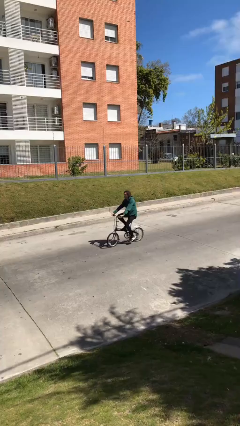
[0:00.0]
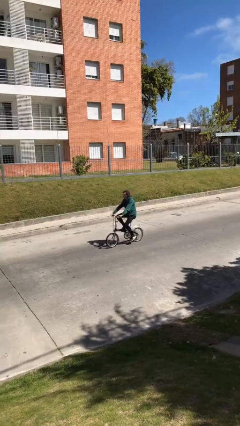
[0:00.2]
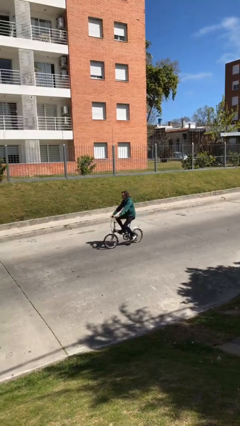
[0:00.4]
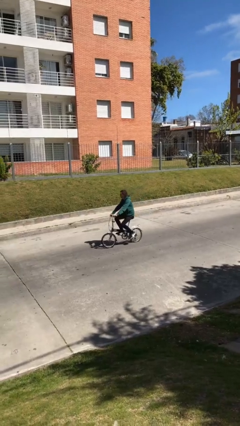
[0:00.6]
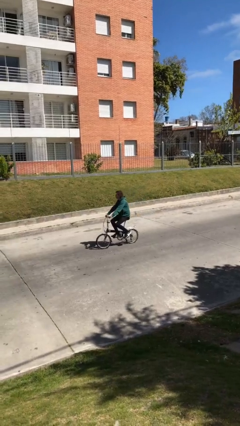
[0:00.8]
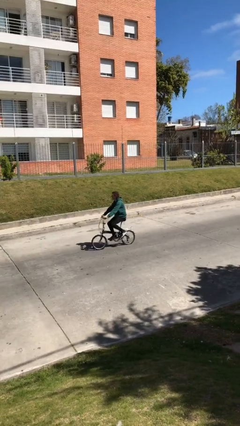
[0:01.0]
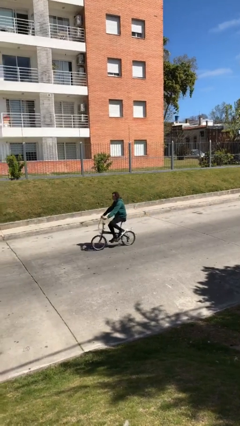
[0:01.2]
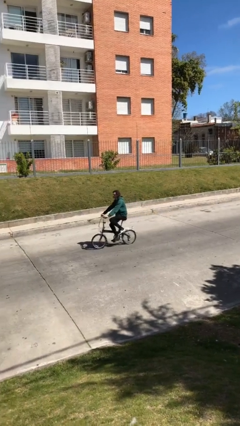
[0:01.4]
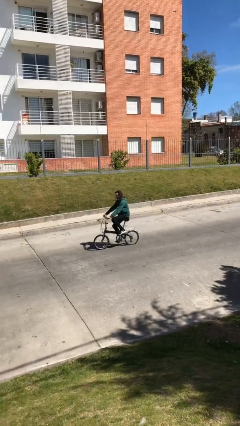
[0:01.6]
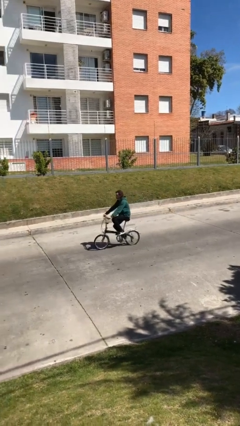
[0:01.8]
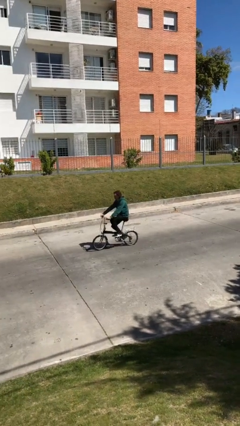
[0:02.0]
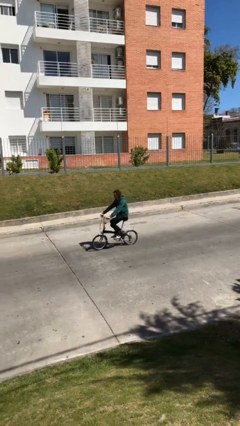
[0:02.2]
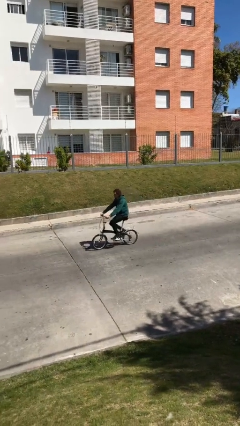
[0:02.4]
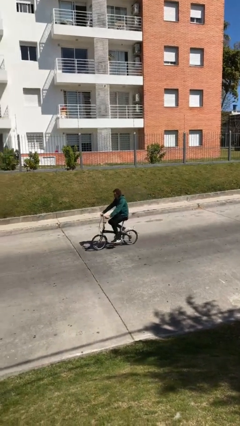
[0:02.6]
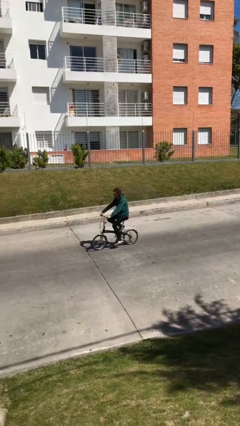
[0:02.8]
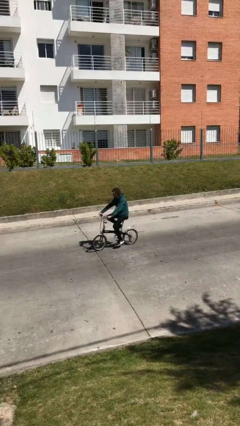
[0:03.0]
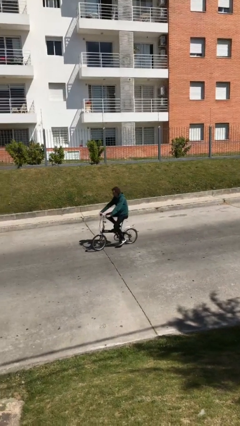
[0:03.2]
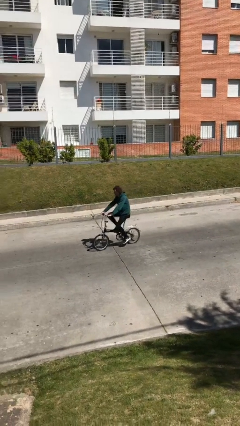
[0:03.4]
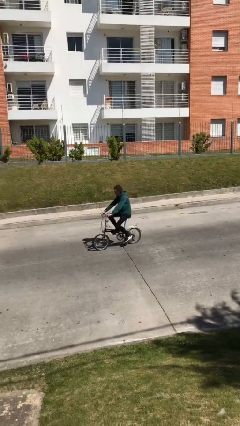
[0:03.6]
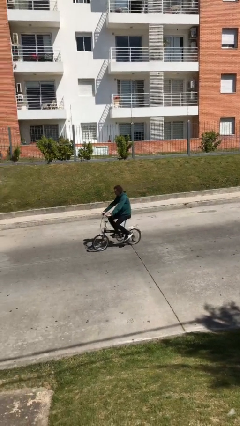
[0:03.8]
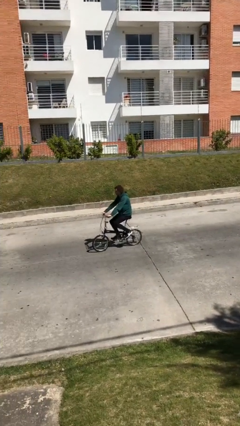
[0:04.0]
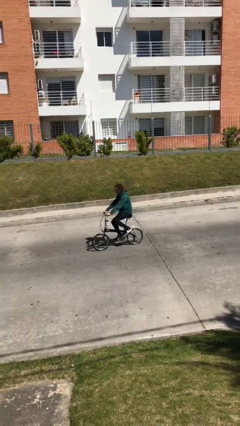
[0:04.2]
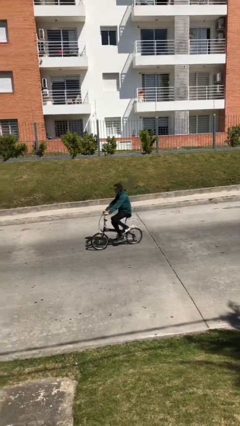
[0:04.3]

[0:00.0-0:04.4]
person rides bicycle

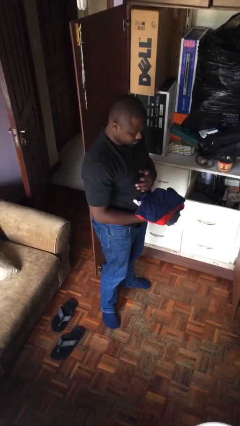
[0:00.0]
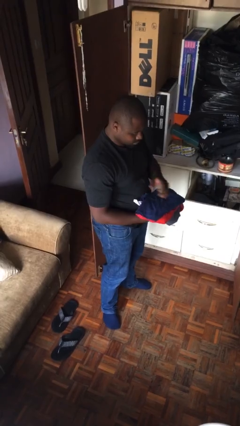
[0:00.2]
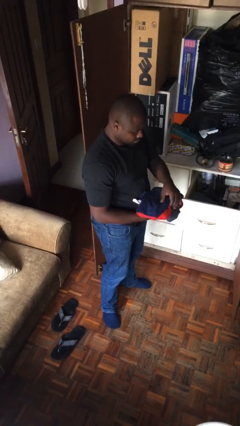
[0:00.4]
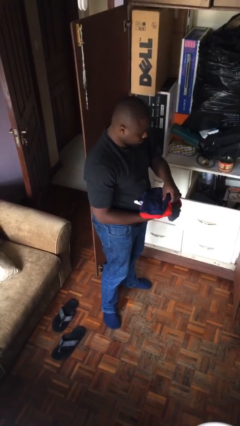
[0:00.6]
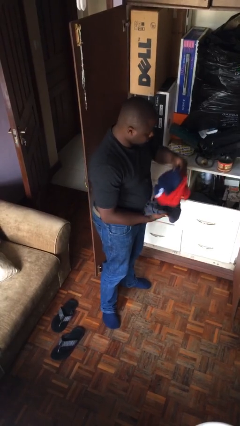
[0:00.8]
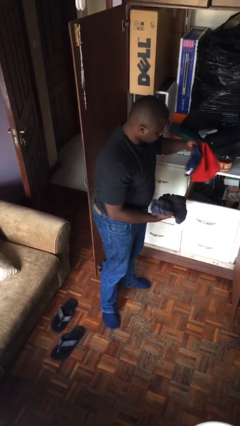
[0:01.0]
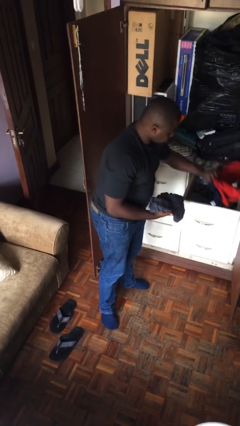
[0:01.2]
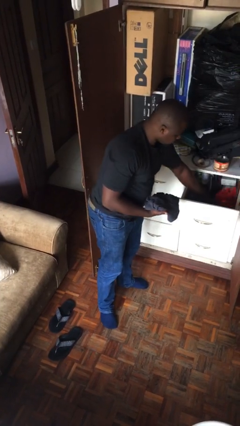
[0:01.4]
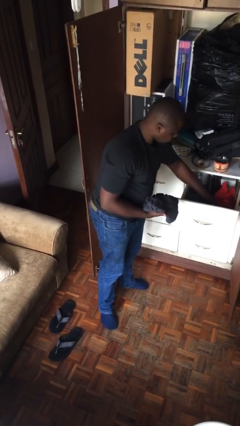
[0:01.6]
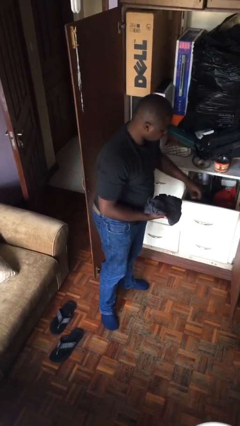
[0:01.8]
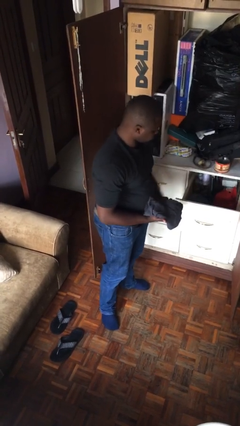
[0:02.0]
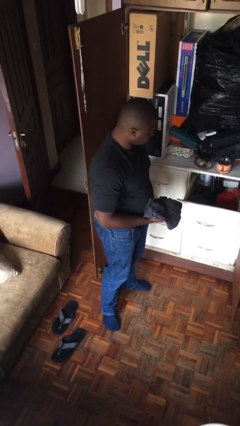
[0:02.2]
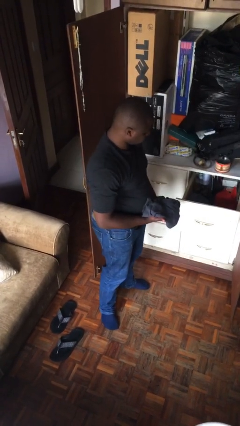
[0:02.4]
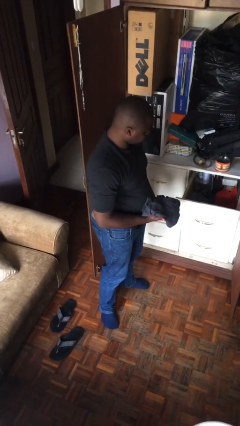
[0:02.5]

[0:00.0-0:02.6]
person puts clothes into dresser

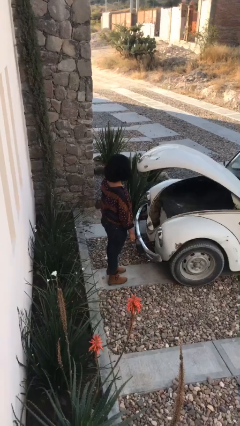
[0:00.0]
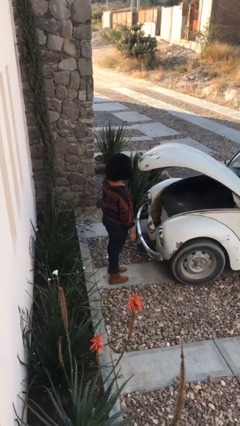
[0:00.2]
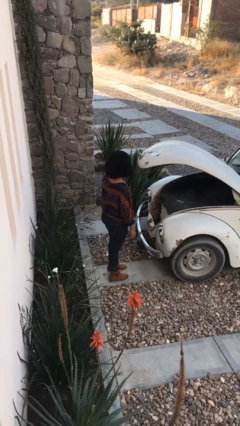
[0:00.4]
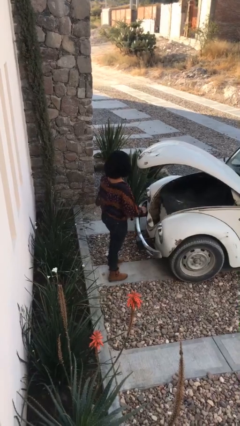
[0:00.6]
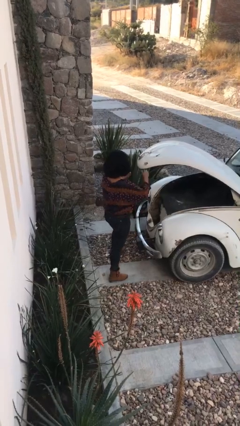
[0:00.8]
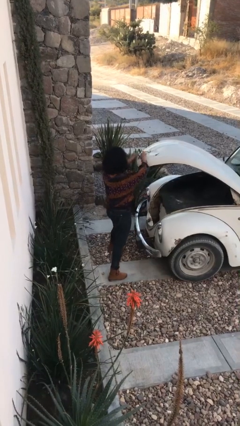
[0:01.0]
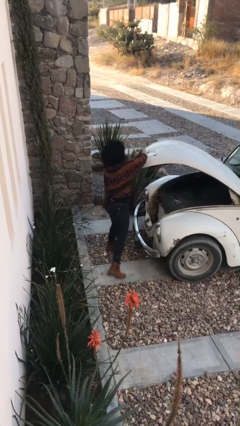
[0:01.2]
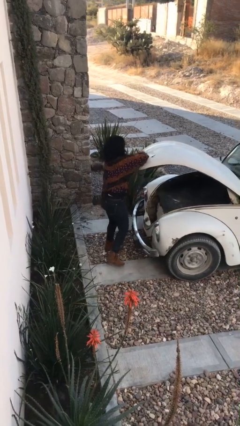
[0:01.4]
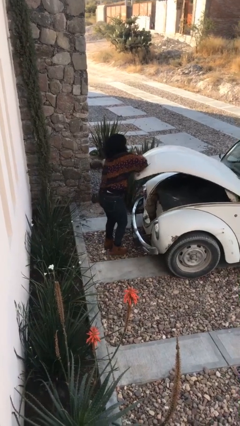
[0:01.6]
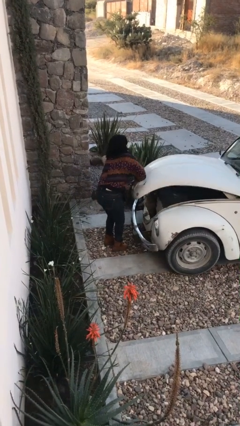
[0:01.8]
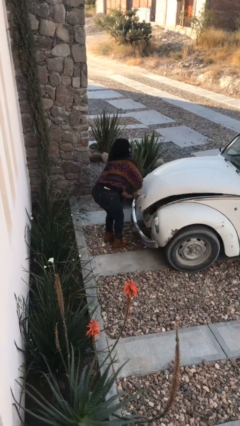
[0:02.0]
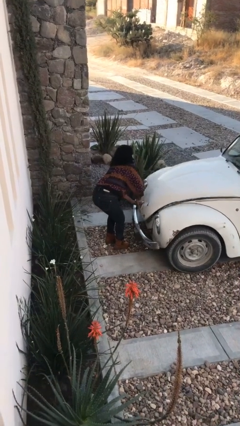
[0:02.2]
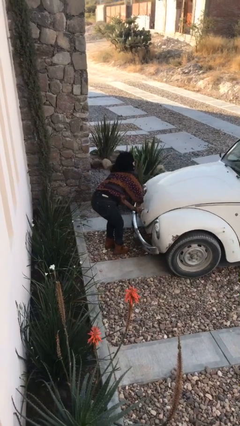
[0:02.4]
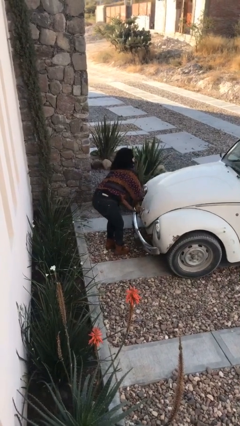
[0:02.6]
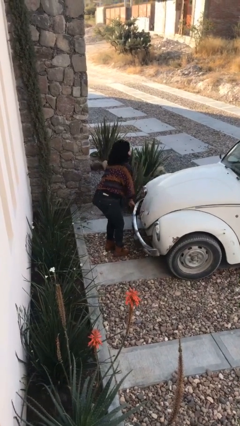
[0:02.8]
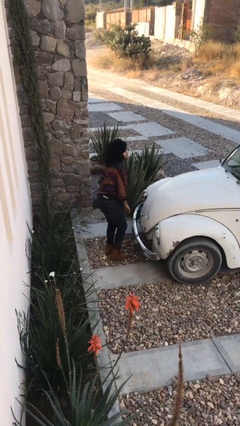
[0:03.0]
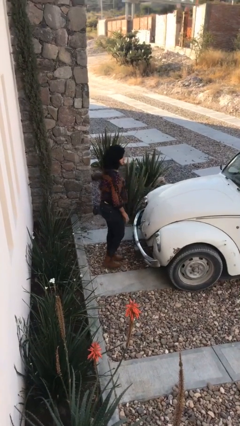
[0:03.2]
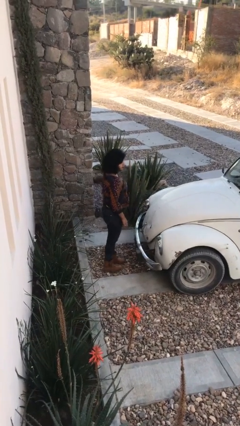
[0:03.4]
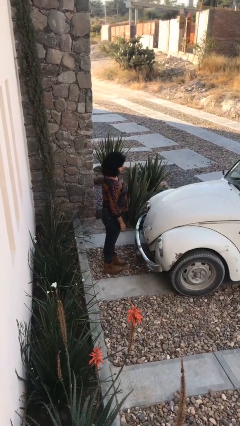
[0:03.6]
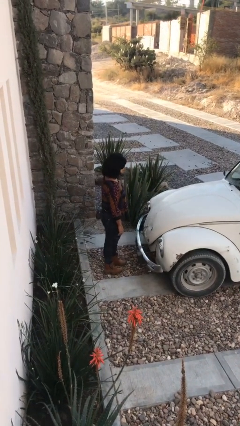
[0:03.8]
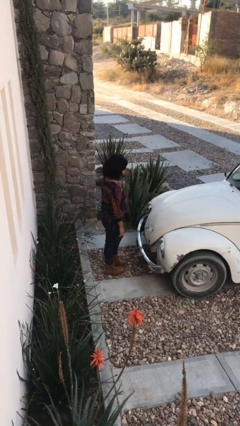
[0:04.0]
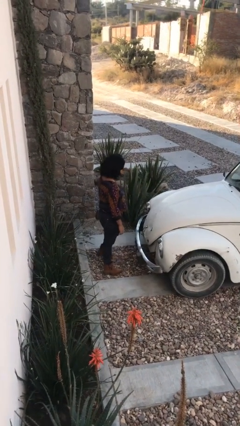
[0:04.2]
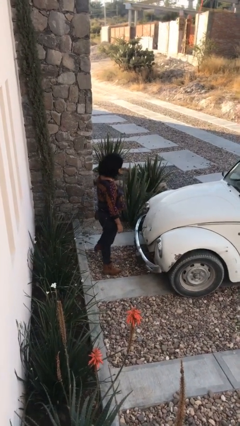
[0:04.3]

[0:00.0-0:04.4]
person closes car trunk

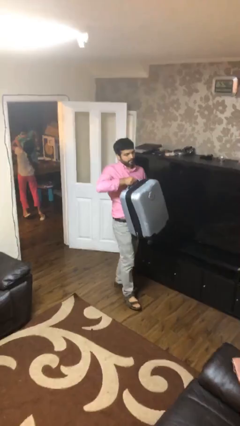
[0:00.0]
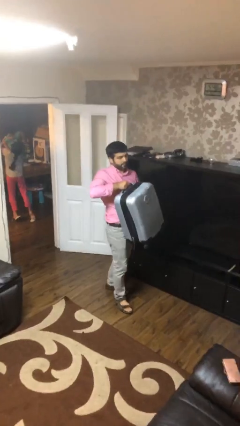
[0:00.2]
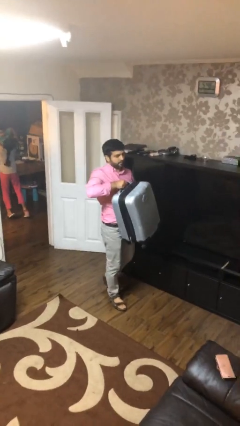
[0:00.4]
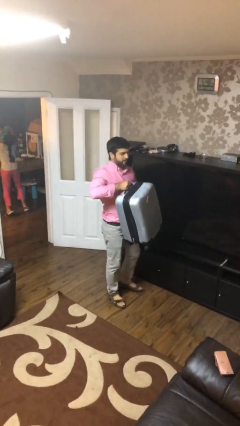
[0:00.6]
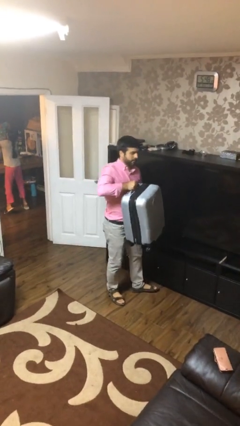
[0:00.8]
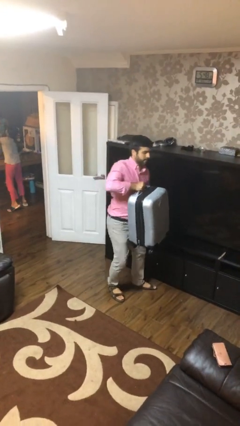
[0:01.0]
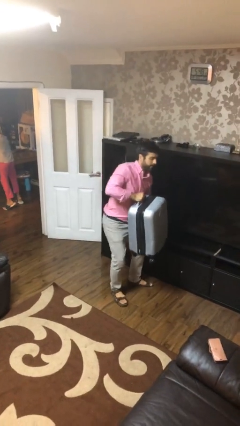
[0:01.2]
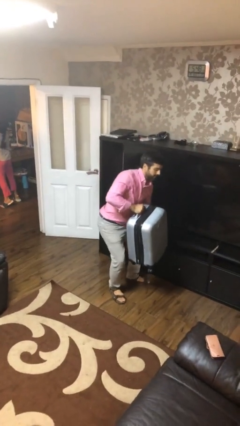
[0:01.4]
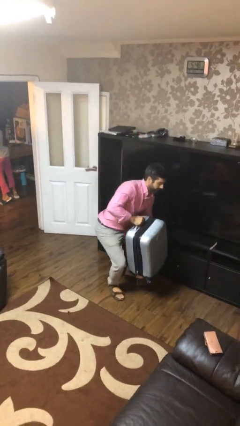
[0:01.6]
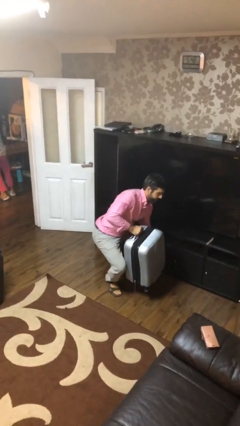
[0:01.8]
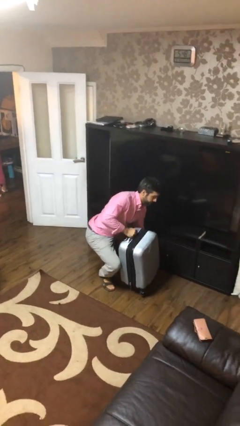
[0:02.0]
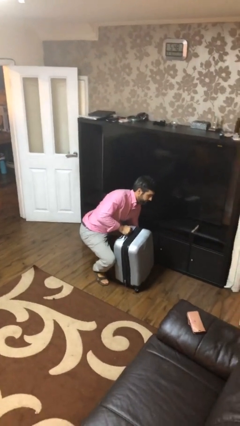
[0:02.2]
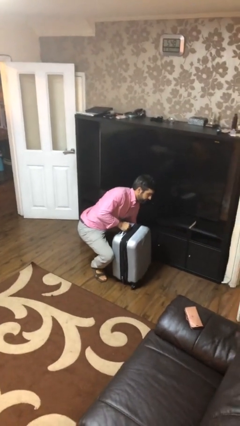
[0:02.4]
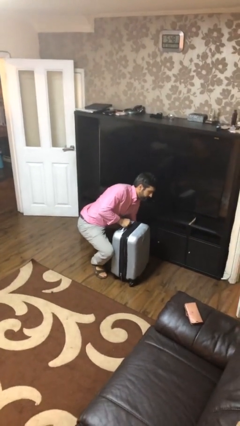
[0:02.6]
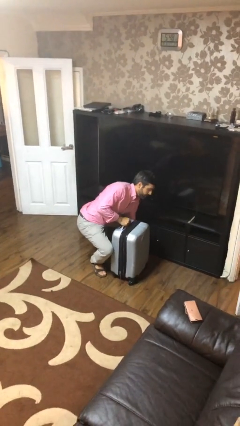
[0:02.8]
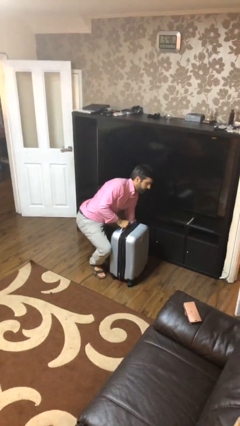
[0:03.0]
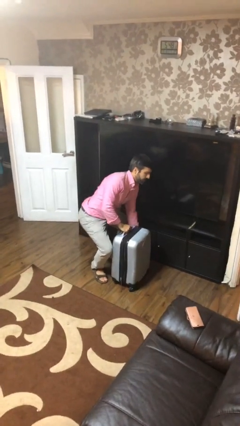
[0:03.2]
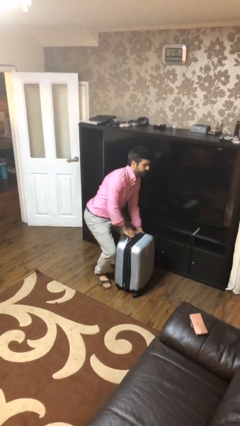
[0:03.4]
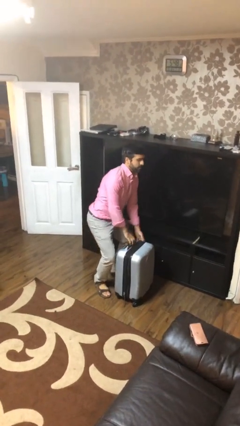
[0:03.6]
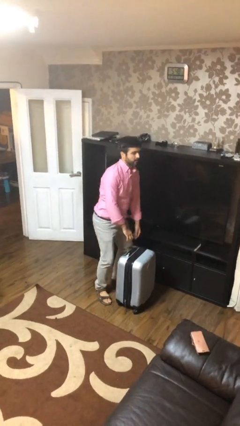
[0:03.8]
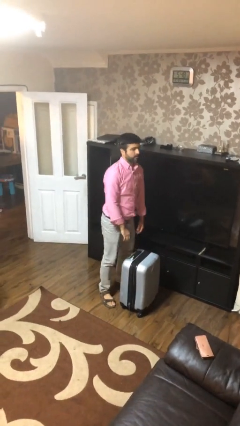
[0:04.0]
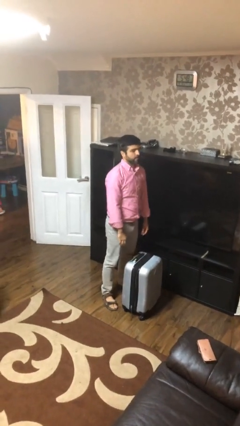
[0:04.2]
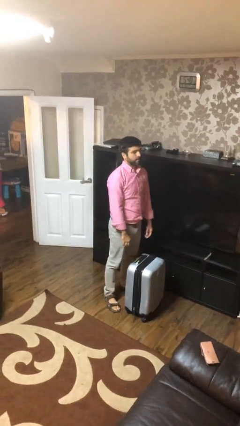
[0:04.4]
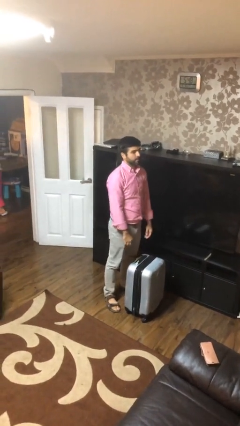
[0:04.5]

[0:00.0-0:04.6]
person puts down object on floor

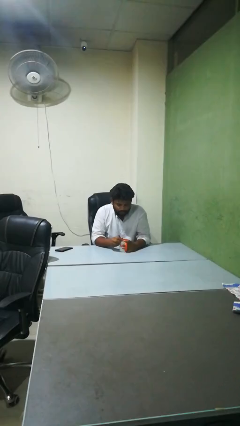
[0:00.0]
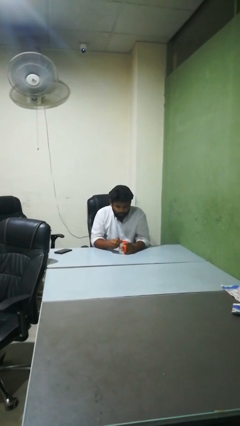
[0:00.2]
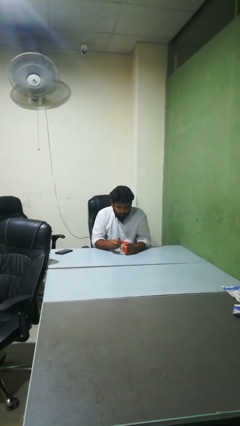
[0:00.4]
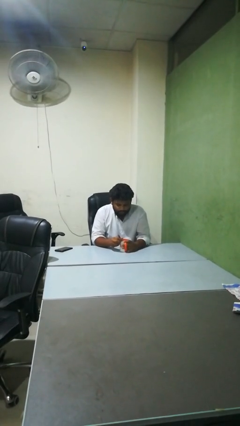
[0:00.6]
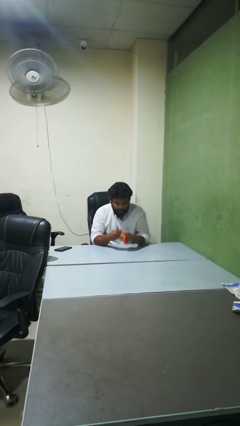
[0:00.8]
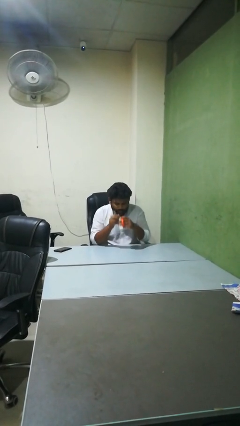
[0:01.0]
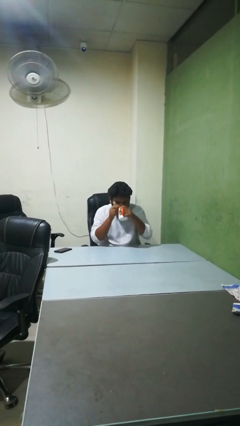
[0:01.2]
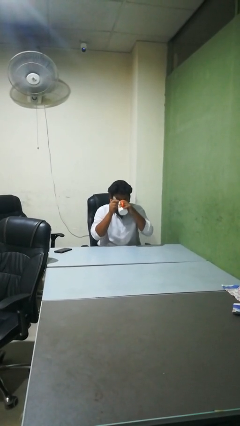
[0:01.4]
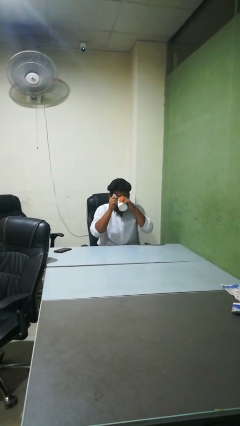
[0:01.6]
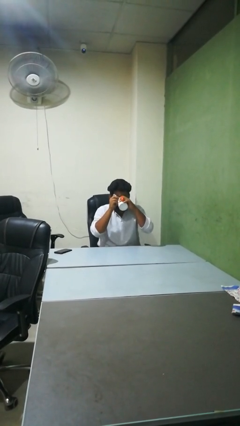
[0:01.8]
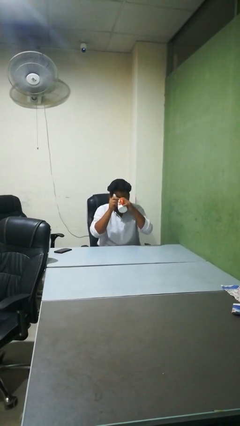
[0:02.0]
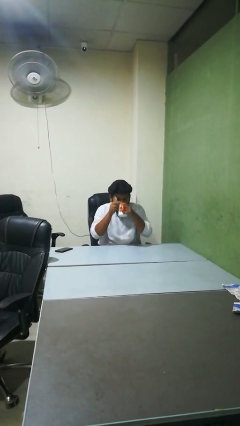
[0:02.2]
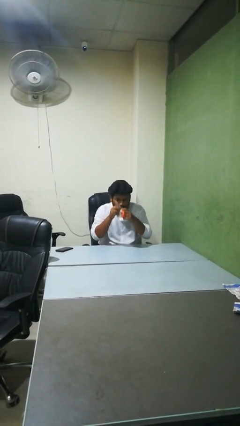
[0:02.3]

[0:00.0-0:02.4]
person drinks from mug
